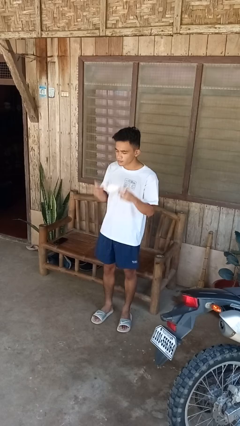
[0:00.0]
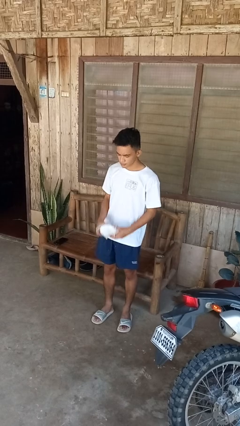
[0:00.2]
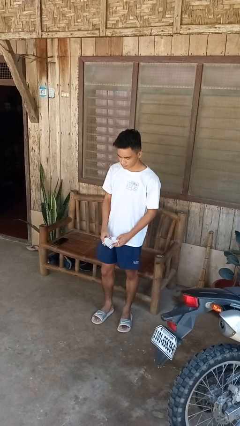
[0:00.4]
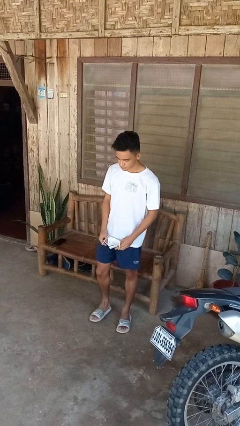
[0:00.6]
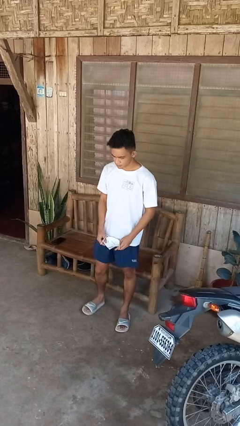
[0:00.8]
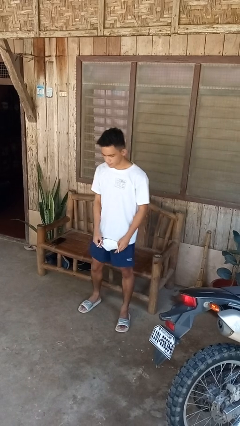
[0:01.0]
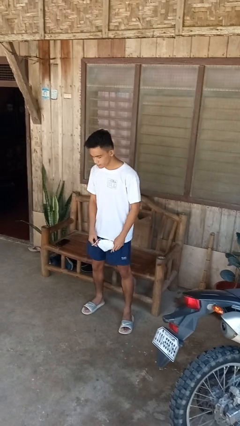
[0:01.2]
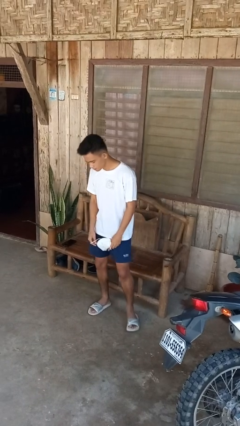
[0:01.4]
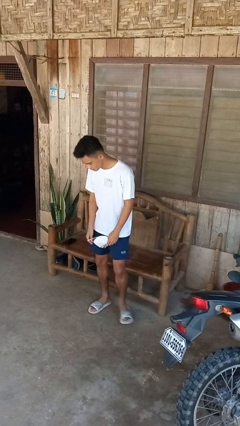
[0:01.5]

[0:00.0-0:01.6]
person takes off facemask

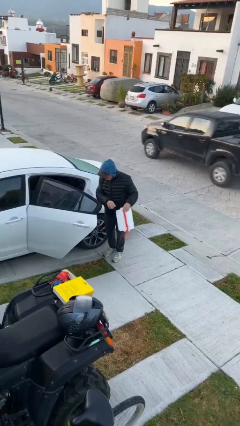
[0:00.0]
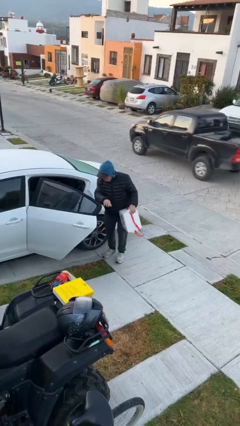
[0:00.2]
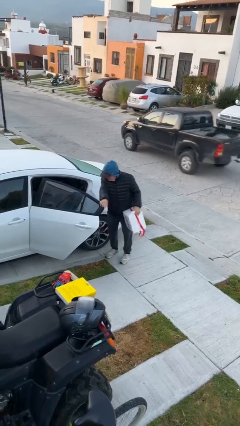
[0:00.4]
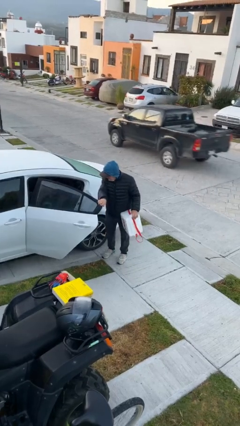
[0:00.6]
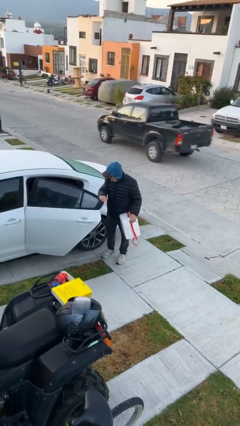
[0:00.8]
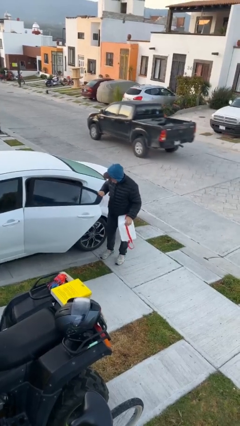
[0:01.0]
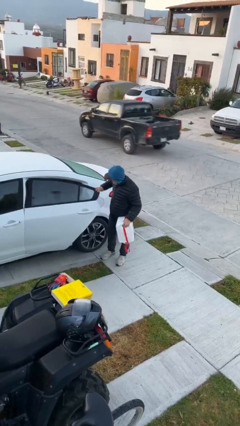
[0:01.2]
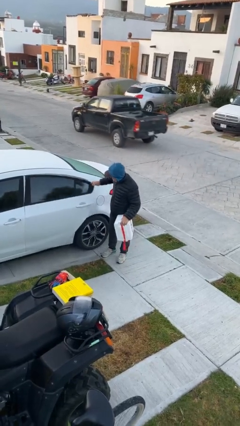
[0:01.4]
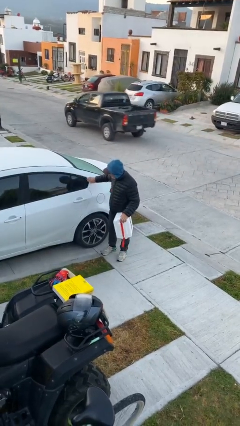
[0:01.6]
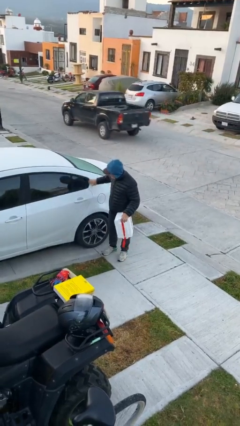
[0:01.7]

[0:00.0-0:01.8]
person closes car door

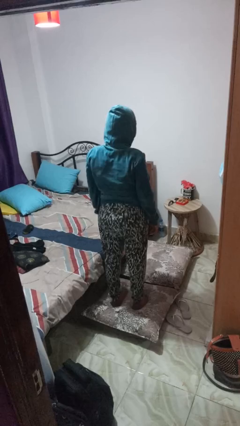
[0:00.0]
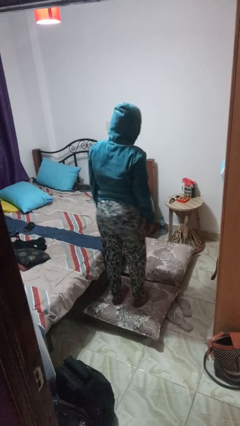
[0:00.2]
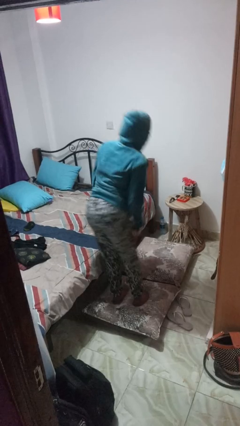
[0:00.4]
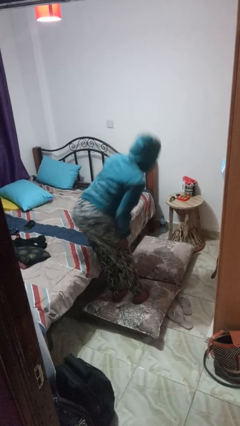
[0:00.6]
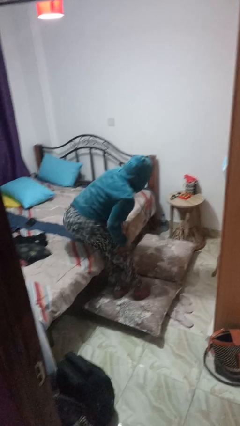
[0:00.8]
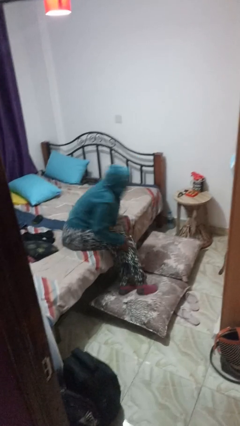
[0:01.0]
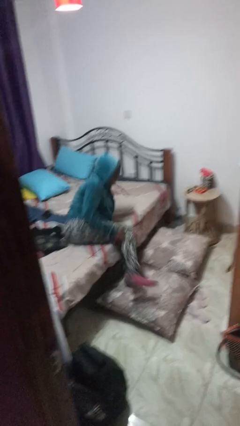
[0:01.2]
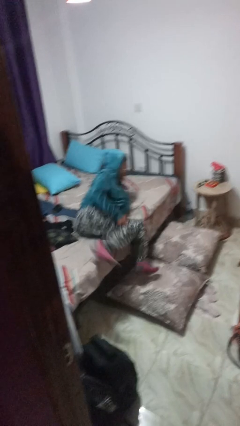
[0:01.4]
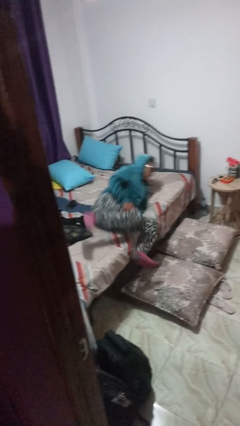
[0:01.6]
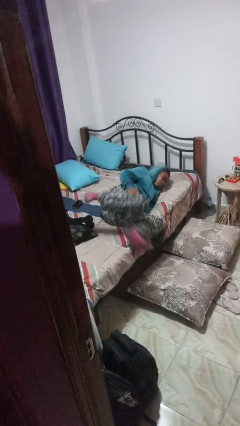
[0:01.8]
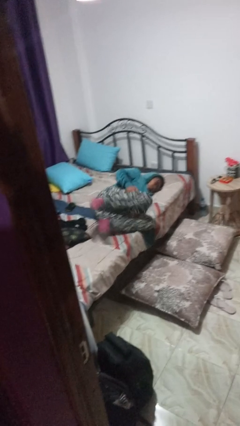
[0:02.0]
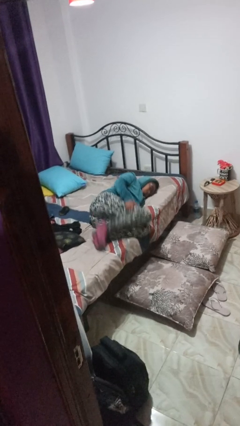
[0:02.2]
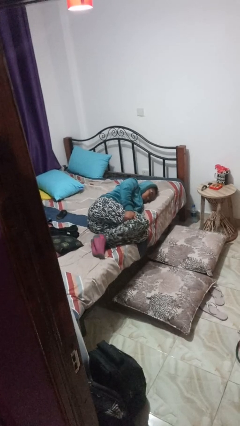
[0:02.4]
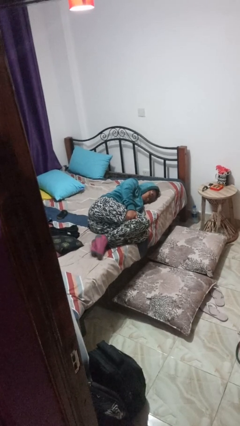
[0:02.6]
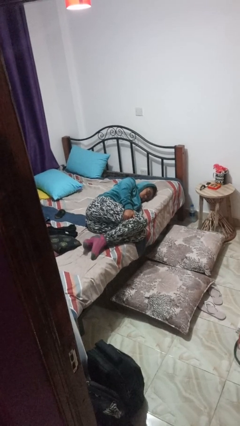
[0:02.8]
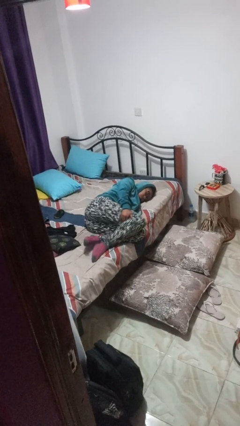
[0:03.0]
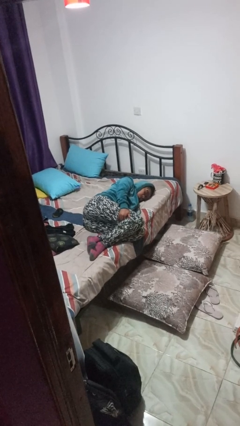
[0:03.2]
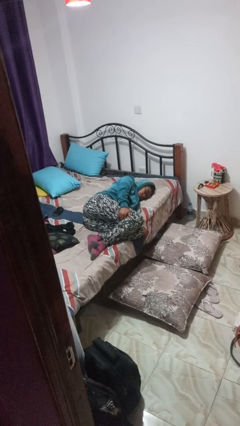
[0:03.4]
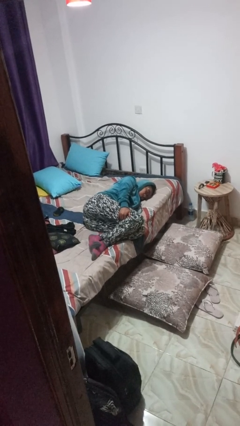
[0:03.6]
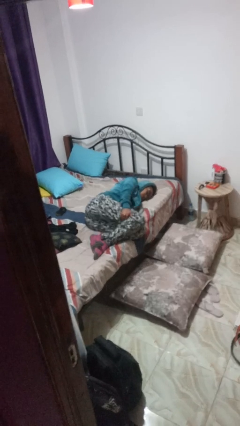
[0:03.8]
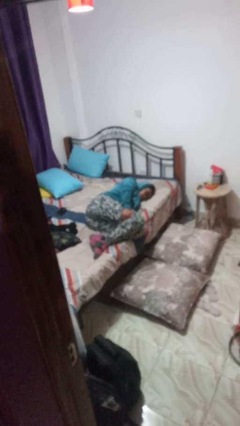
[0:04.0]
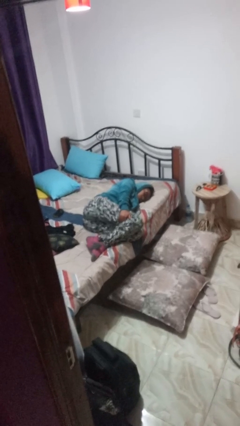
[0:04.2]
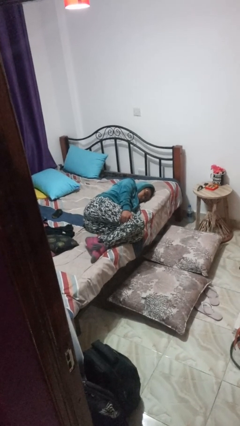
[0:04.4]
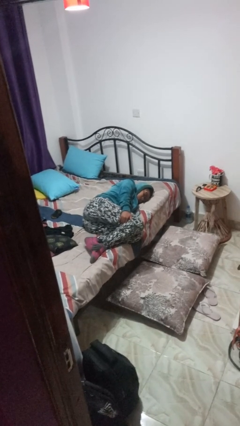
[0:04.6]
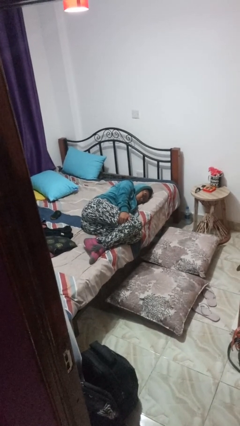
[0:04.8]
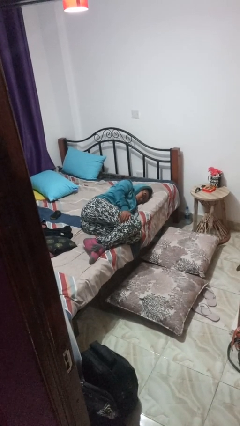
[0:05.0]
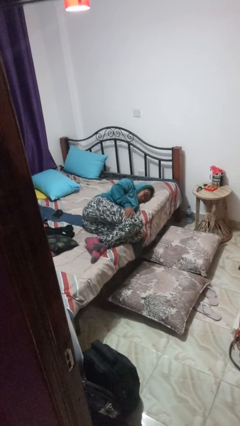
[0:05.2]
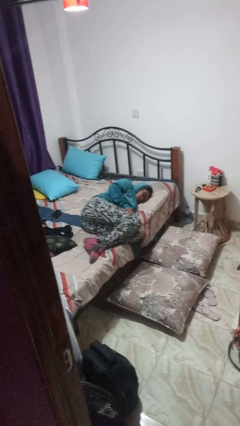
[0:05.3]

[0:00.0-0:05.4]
person lies down on bed

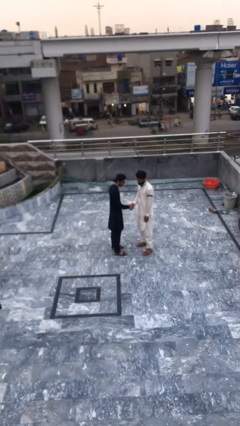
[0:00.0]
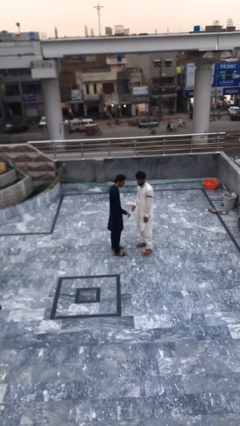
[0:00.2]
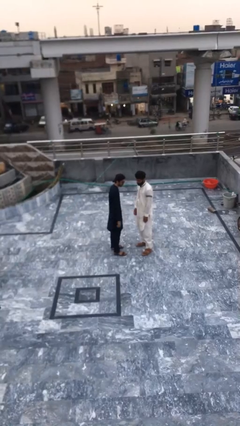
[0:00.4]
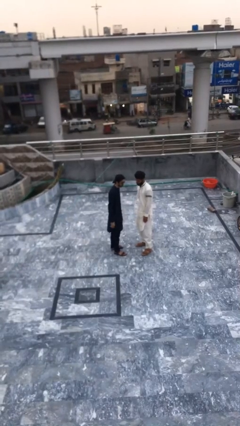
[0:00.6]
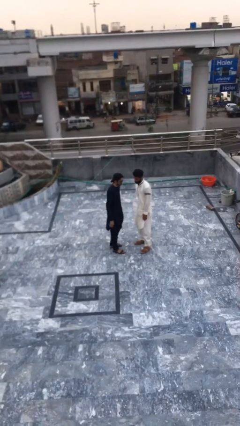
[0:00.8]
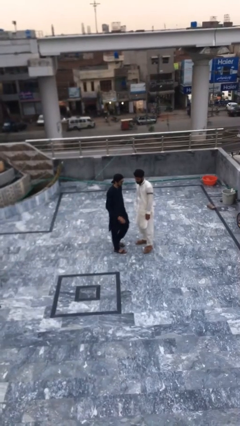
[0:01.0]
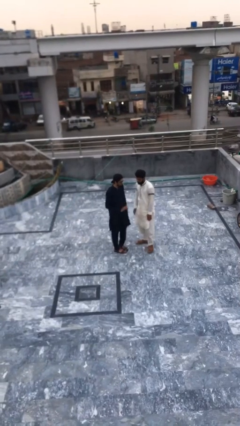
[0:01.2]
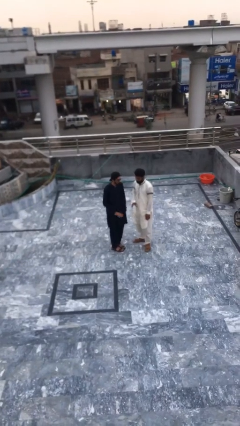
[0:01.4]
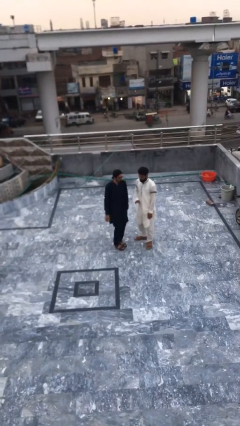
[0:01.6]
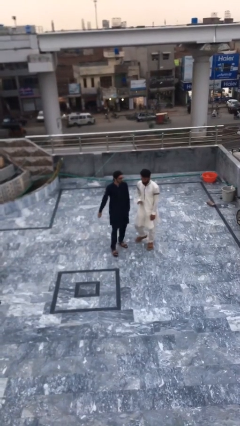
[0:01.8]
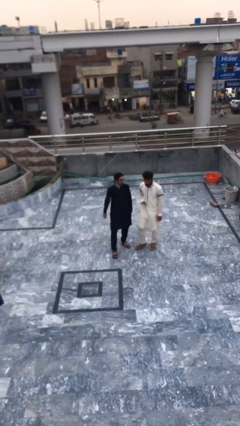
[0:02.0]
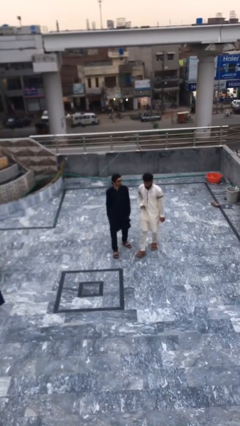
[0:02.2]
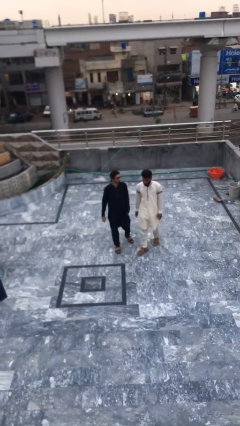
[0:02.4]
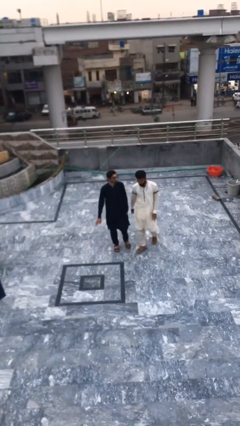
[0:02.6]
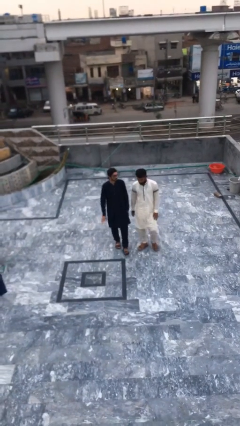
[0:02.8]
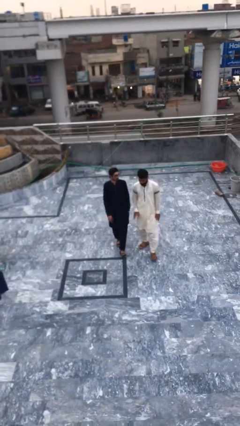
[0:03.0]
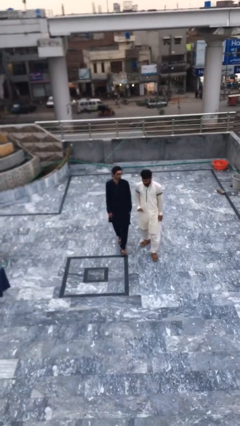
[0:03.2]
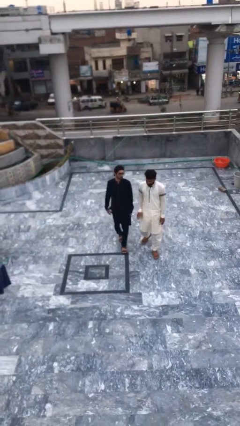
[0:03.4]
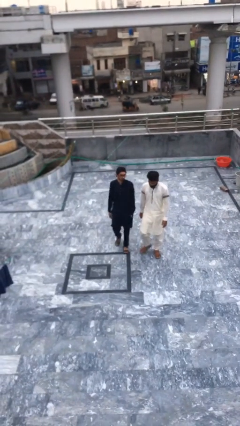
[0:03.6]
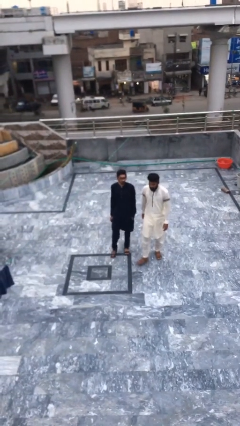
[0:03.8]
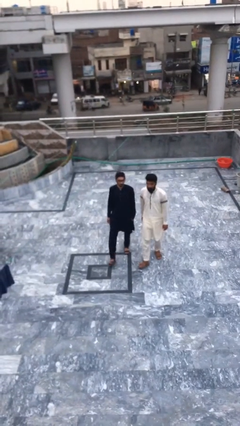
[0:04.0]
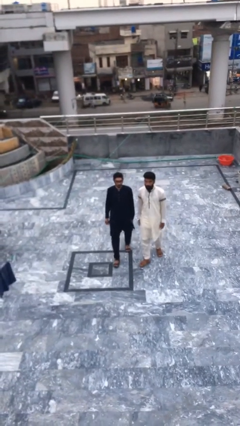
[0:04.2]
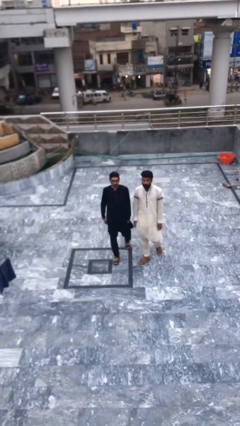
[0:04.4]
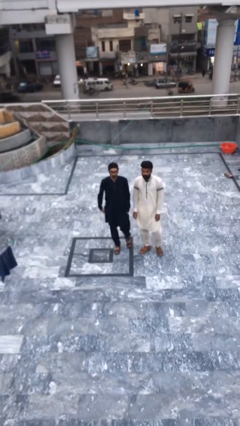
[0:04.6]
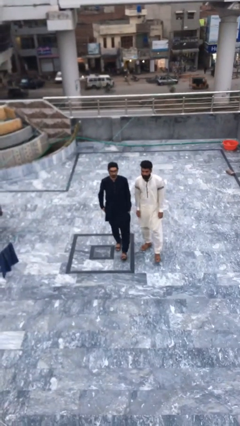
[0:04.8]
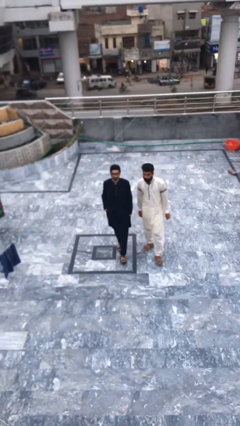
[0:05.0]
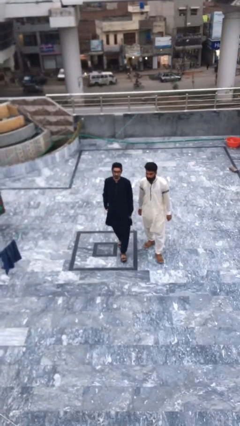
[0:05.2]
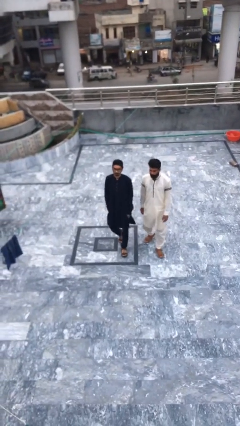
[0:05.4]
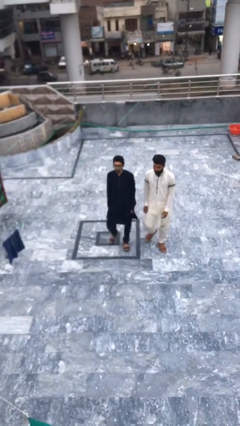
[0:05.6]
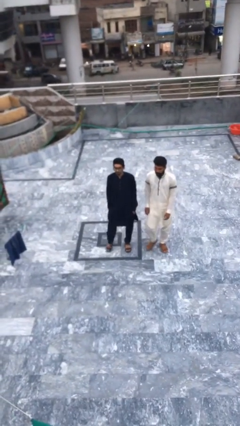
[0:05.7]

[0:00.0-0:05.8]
person talks to person

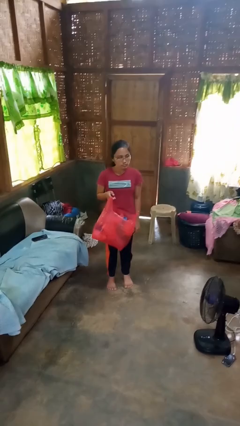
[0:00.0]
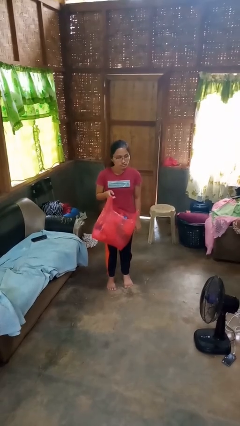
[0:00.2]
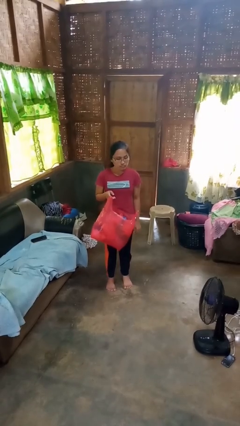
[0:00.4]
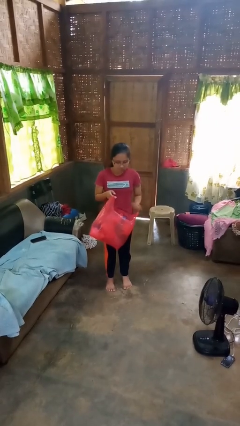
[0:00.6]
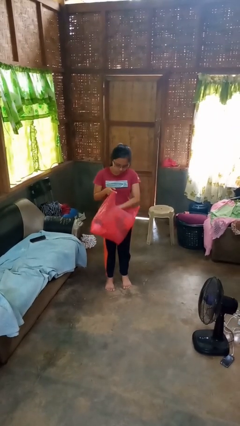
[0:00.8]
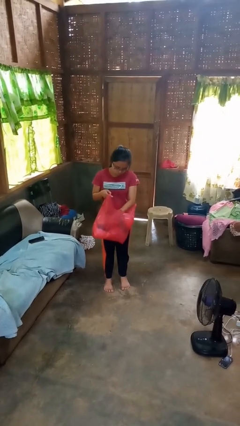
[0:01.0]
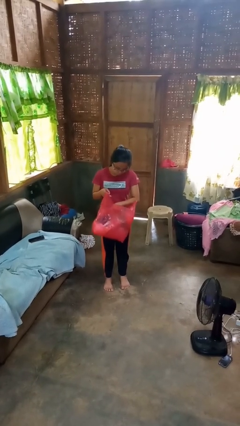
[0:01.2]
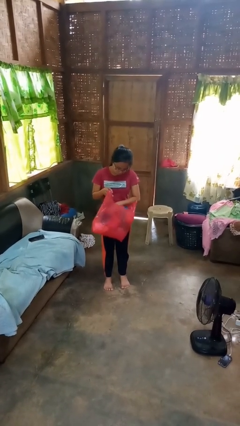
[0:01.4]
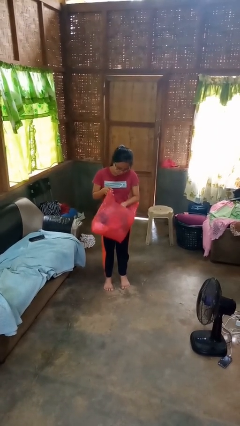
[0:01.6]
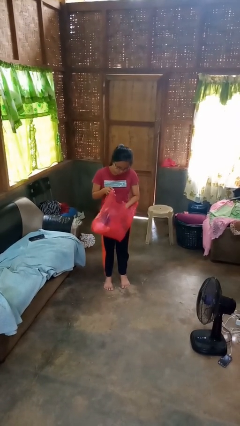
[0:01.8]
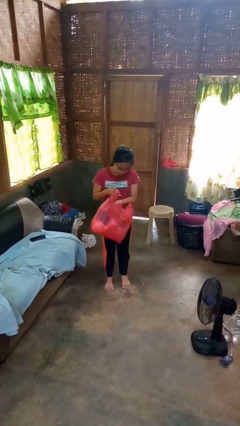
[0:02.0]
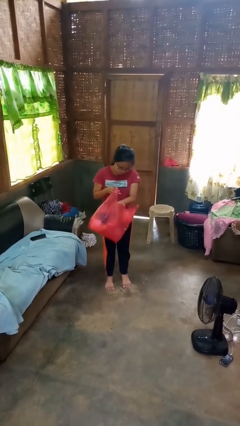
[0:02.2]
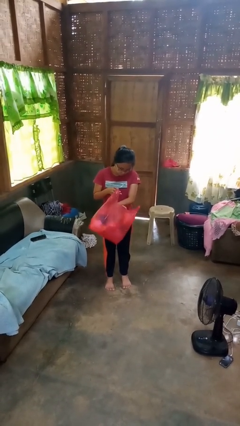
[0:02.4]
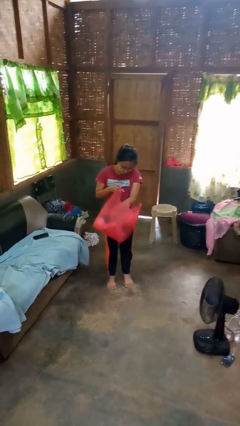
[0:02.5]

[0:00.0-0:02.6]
person searches in bag

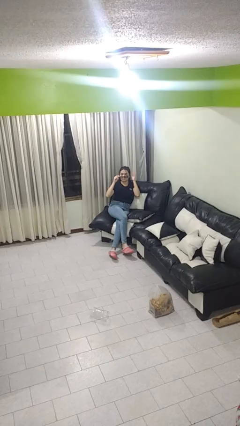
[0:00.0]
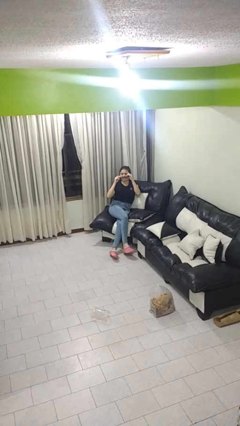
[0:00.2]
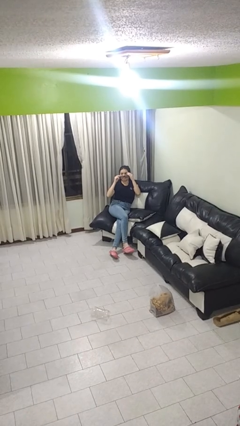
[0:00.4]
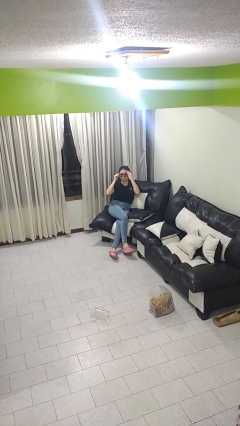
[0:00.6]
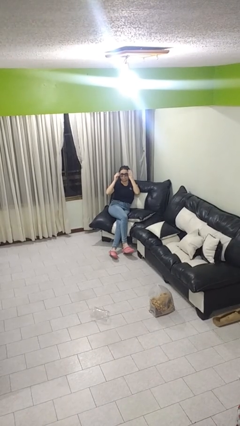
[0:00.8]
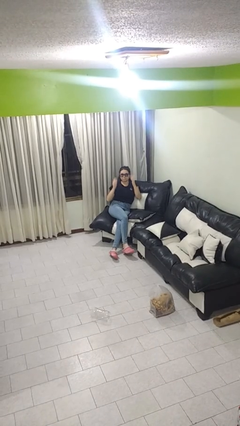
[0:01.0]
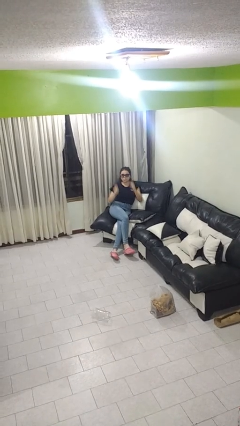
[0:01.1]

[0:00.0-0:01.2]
person puts on sunglasses
